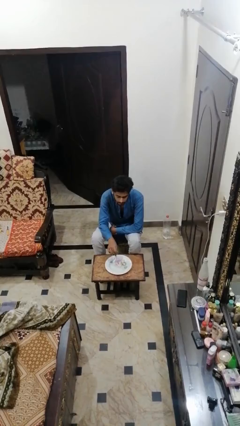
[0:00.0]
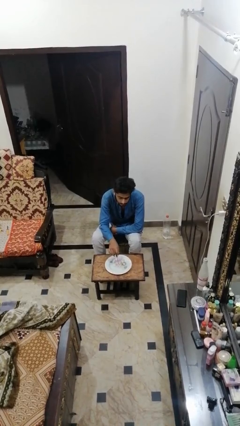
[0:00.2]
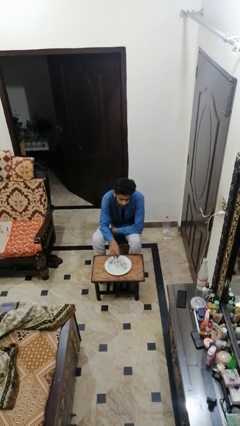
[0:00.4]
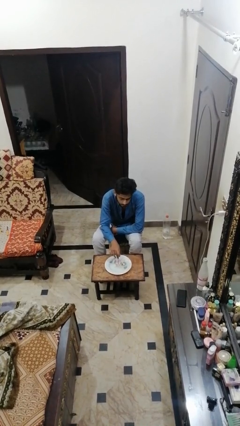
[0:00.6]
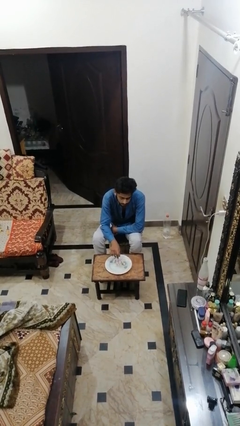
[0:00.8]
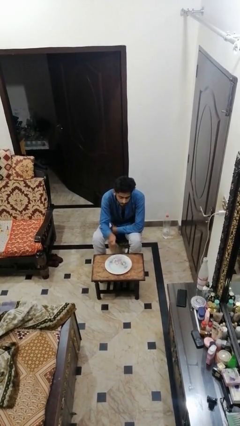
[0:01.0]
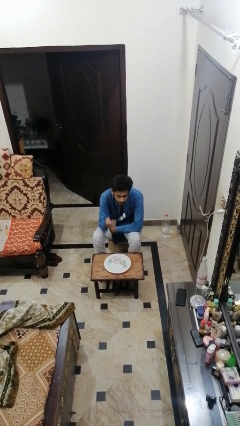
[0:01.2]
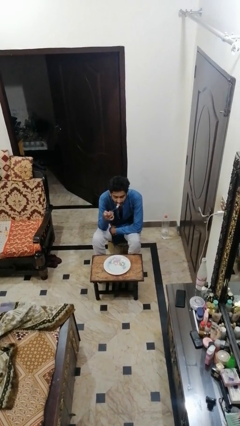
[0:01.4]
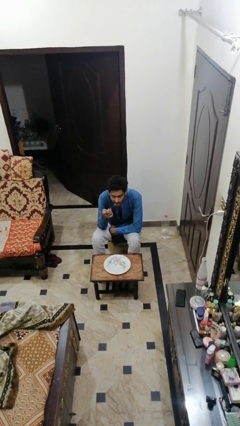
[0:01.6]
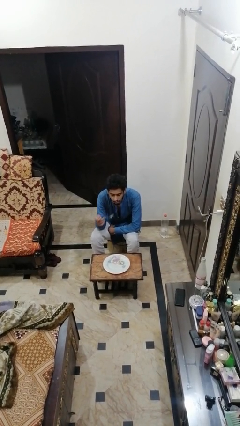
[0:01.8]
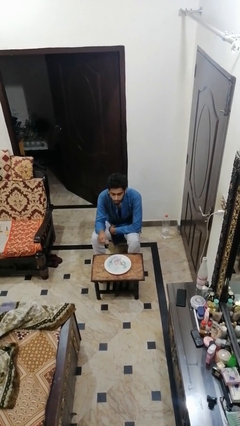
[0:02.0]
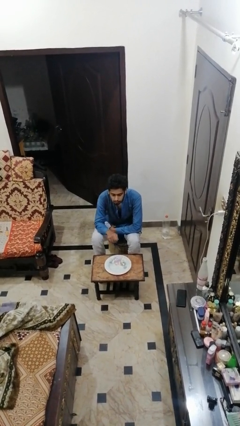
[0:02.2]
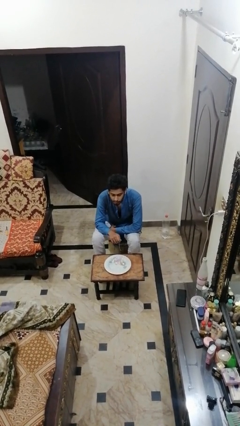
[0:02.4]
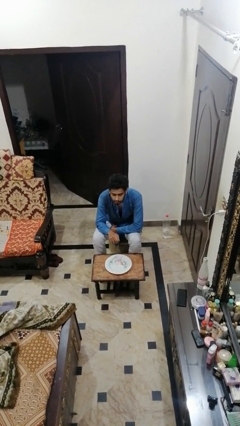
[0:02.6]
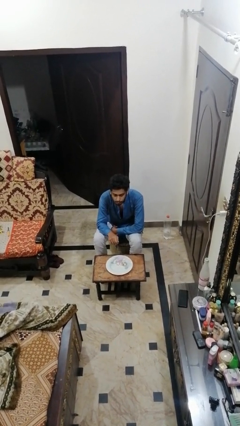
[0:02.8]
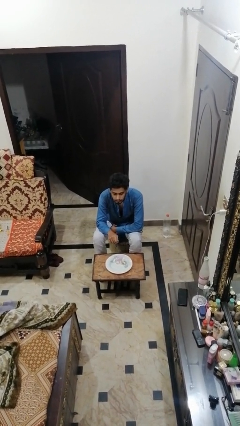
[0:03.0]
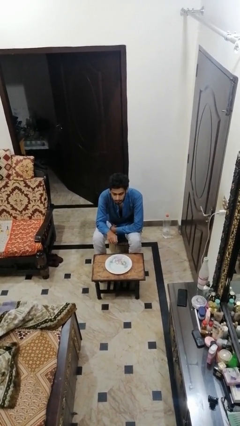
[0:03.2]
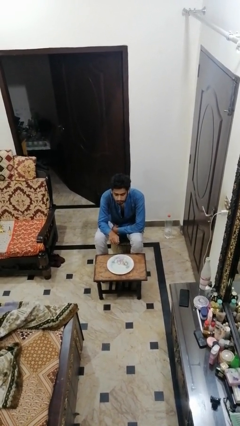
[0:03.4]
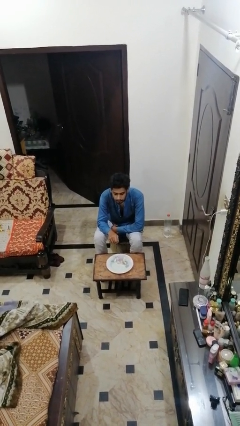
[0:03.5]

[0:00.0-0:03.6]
person eats with utensil

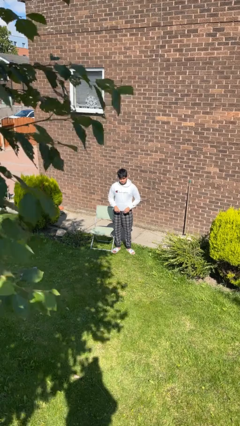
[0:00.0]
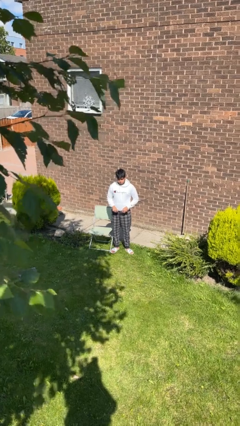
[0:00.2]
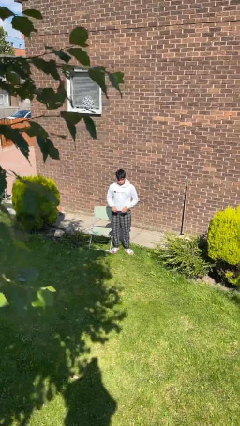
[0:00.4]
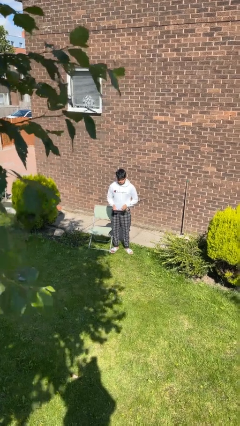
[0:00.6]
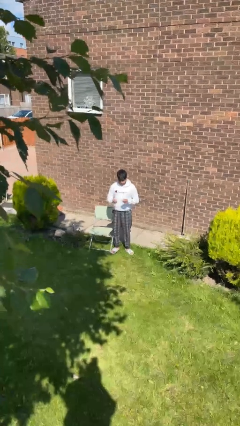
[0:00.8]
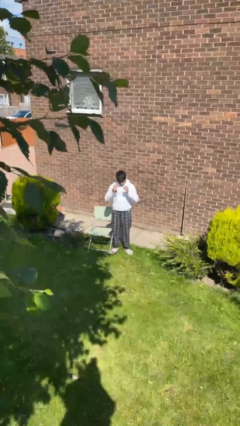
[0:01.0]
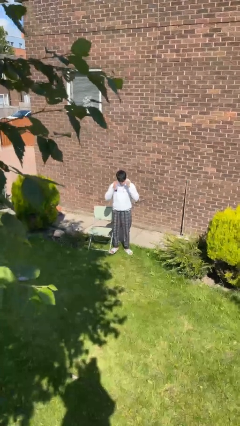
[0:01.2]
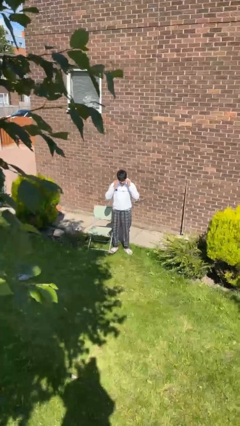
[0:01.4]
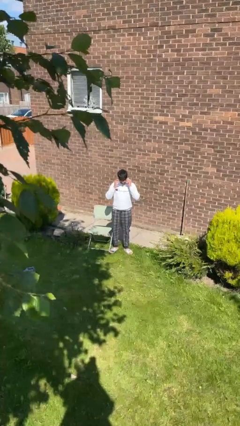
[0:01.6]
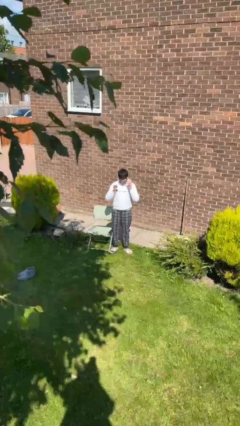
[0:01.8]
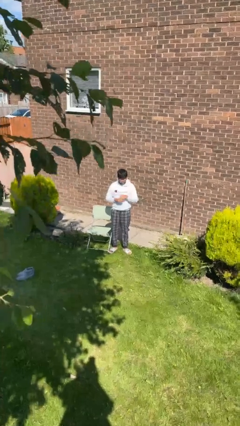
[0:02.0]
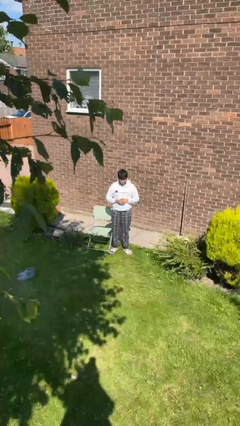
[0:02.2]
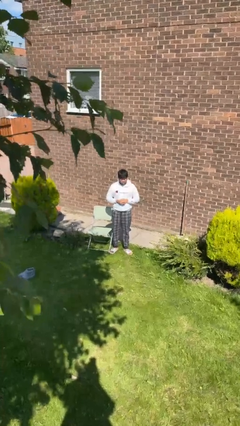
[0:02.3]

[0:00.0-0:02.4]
person puts on glasses

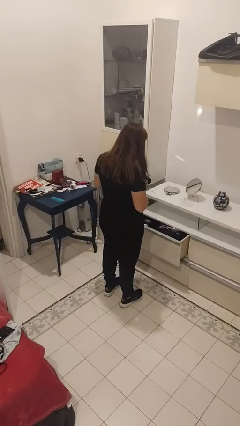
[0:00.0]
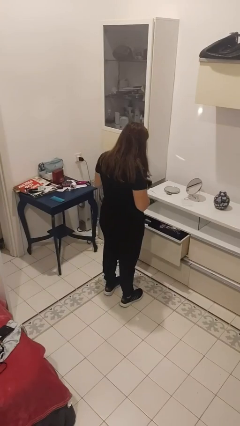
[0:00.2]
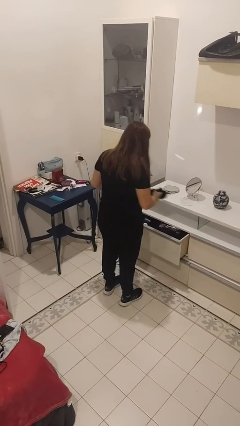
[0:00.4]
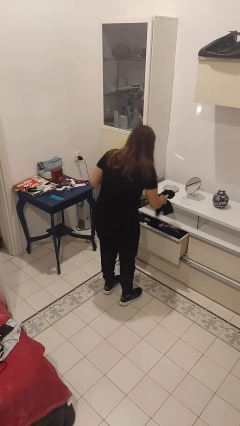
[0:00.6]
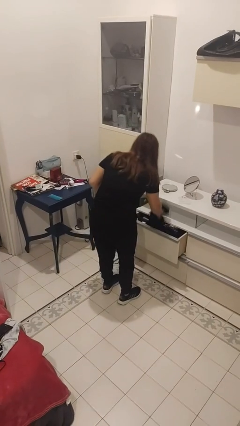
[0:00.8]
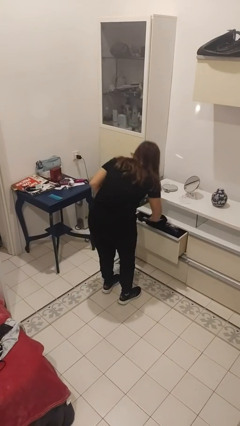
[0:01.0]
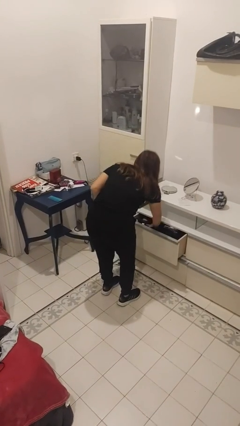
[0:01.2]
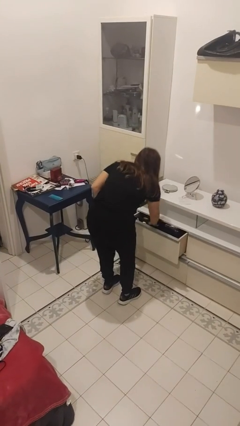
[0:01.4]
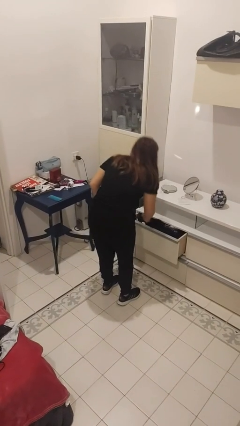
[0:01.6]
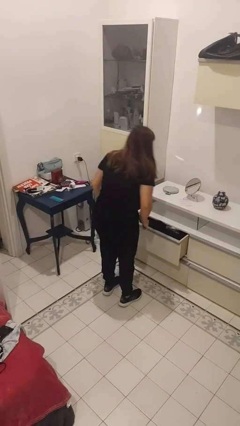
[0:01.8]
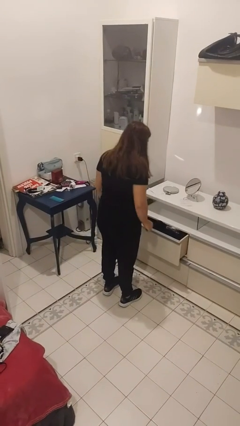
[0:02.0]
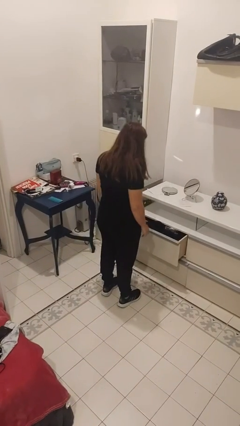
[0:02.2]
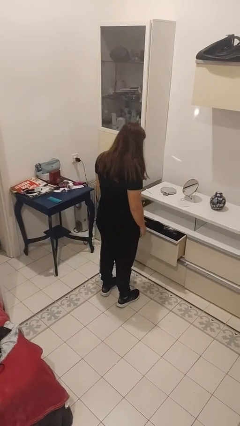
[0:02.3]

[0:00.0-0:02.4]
person puts clothes into dresser

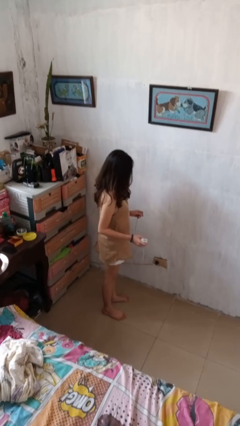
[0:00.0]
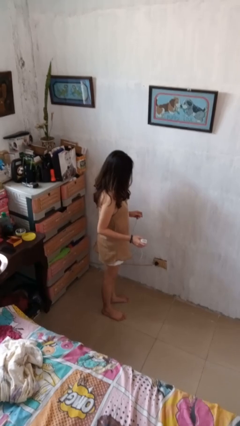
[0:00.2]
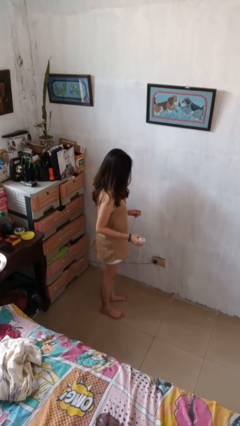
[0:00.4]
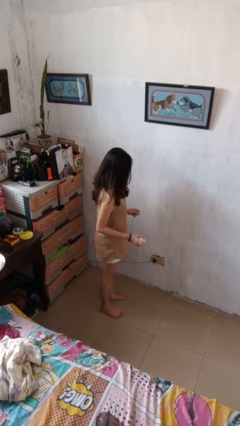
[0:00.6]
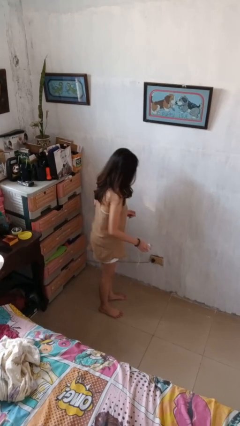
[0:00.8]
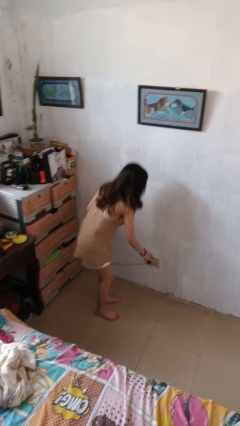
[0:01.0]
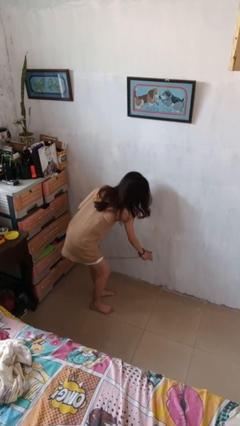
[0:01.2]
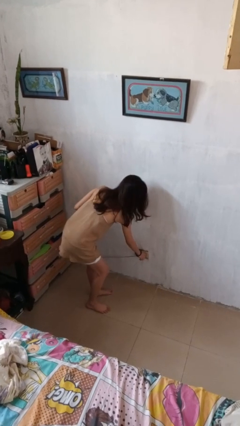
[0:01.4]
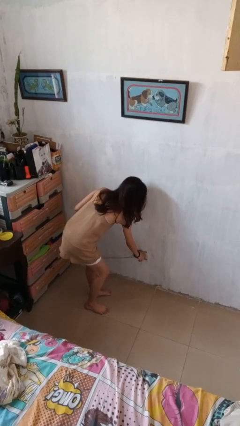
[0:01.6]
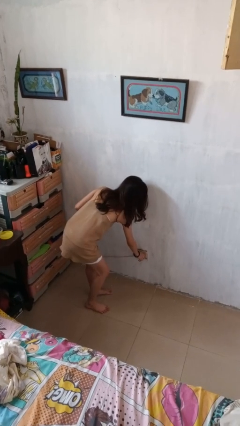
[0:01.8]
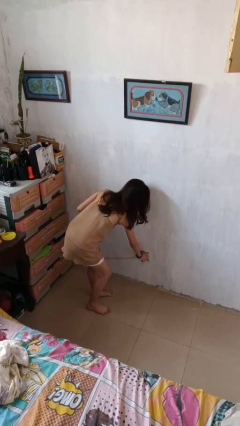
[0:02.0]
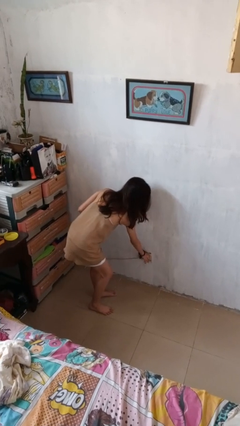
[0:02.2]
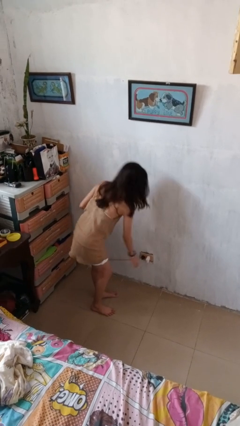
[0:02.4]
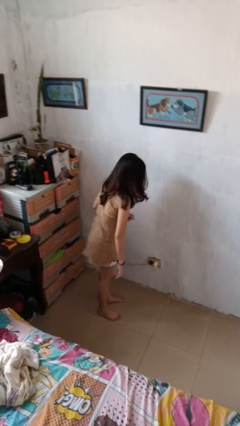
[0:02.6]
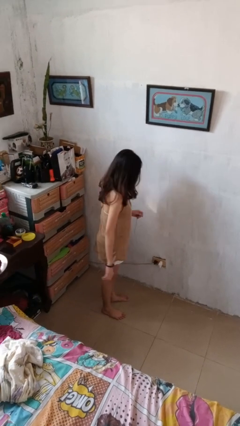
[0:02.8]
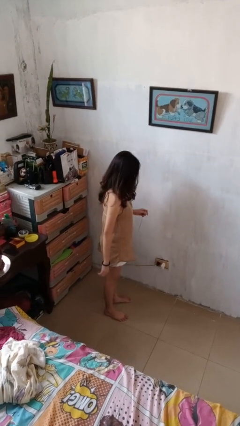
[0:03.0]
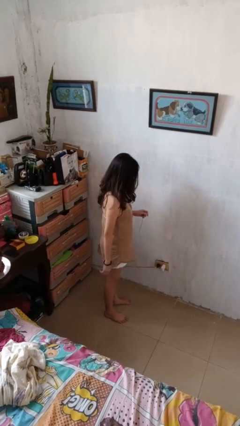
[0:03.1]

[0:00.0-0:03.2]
person plugs into electrical socket

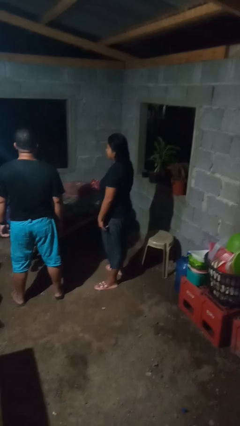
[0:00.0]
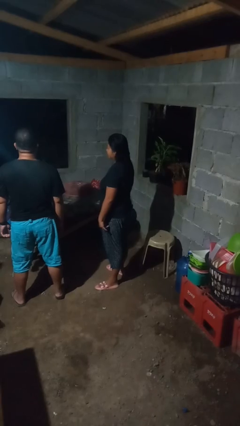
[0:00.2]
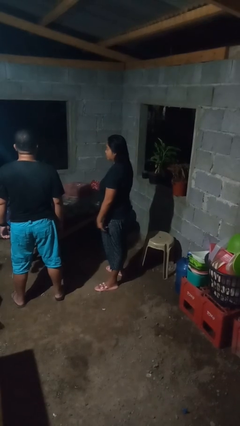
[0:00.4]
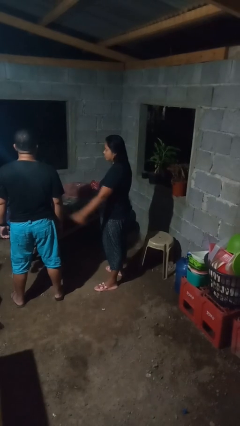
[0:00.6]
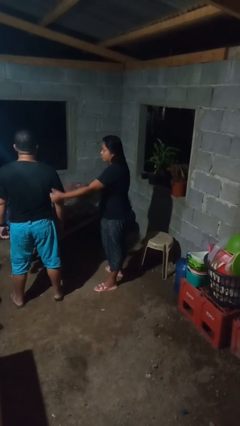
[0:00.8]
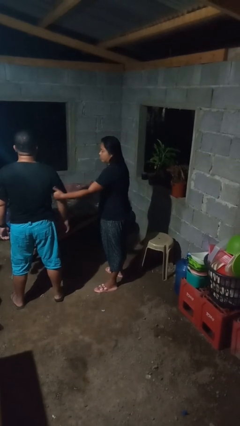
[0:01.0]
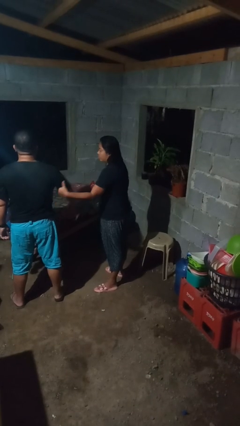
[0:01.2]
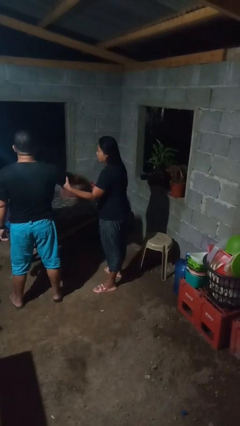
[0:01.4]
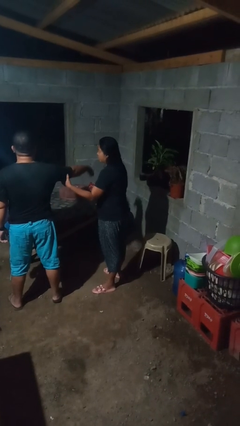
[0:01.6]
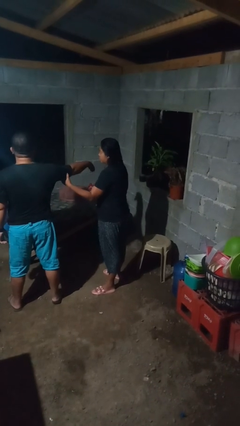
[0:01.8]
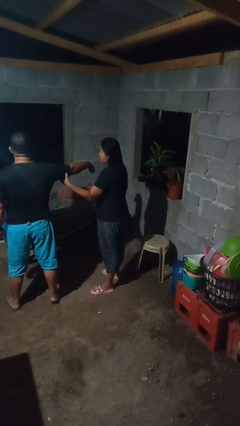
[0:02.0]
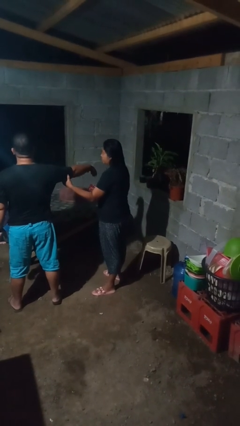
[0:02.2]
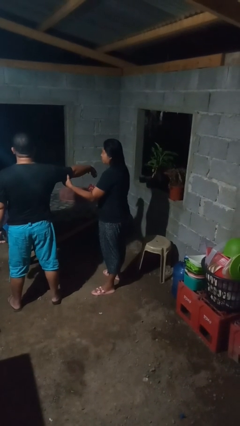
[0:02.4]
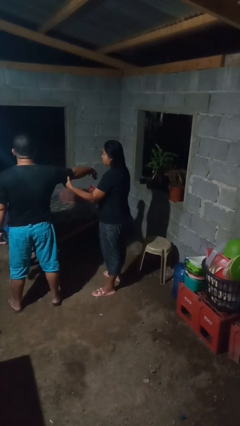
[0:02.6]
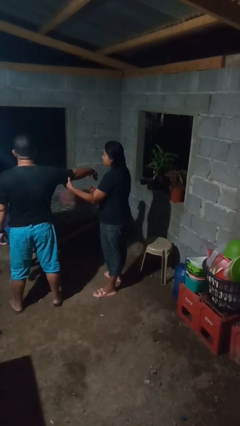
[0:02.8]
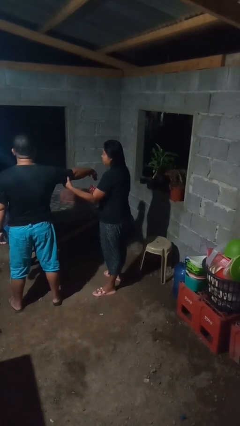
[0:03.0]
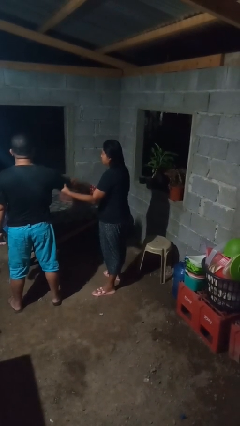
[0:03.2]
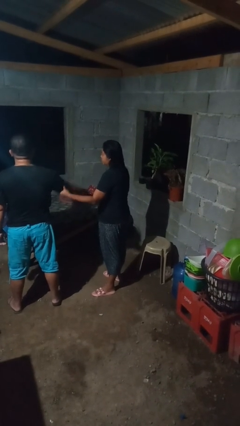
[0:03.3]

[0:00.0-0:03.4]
person grabs person by bicep

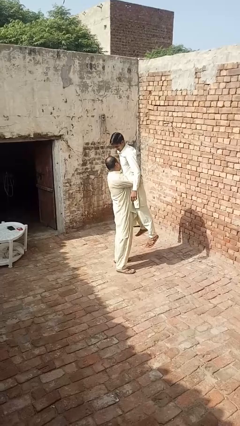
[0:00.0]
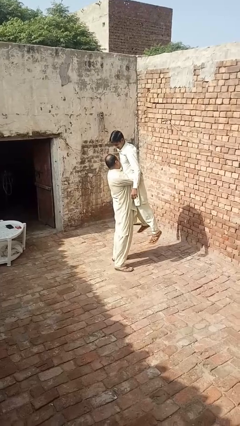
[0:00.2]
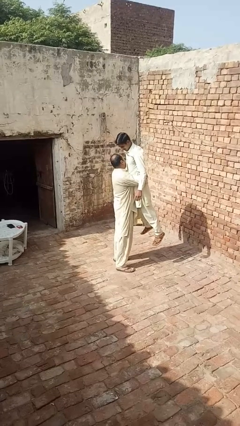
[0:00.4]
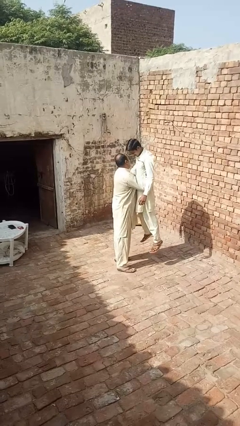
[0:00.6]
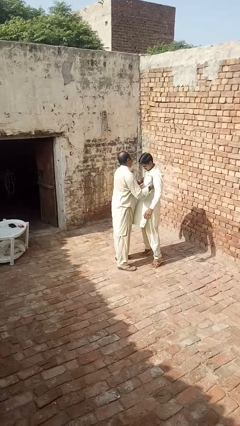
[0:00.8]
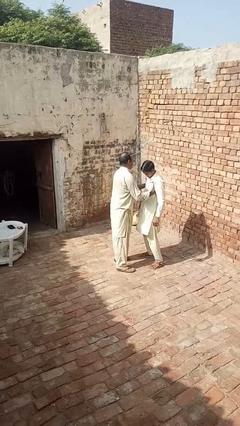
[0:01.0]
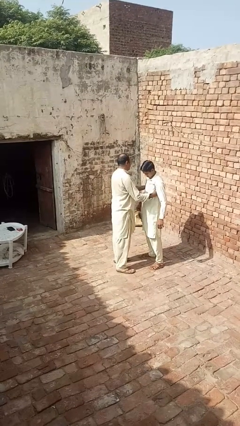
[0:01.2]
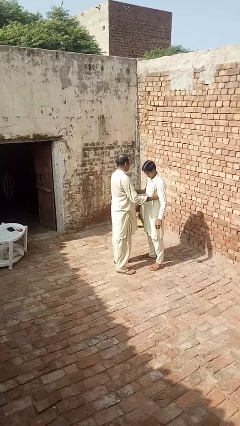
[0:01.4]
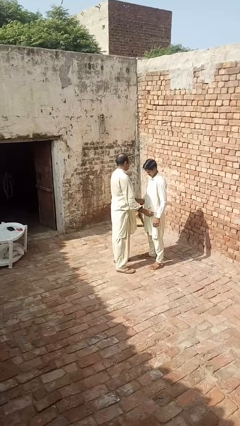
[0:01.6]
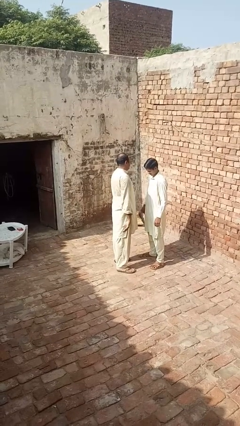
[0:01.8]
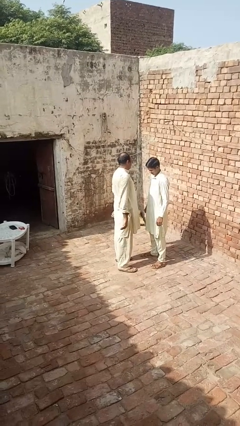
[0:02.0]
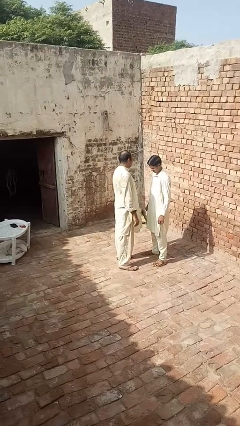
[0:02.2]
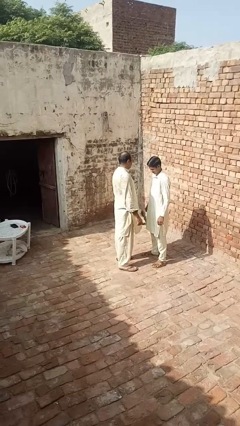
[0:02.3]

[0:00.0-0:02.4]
person puts down person
